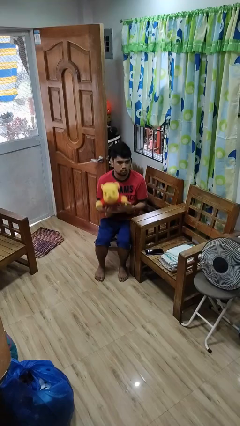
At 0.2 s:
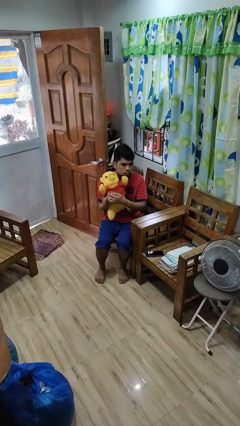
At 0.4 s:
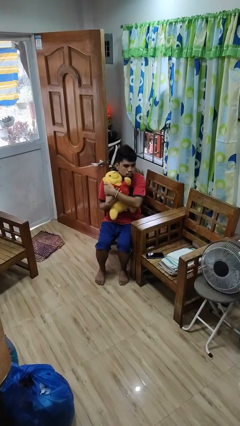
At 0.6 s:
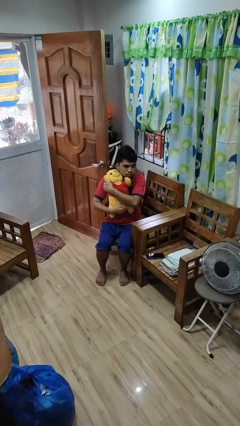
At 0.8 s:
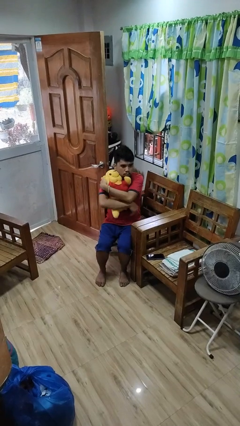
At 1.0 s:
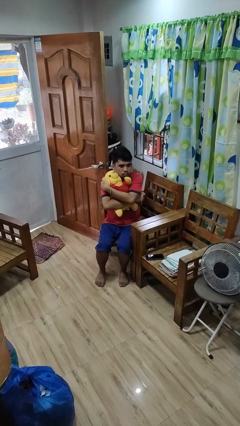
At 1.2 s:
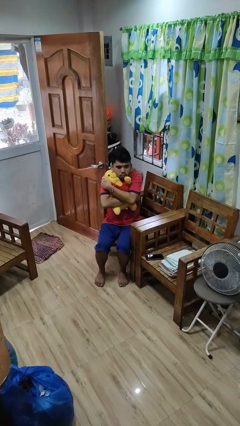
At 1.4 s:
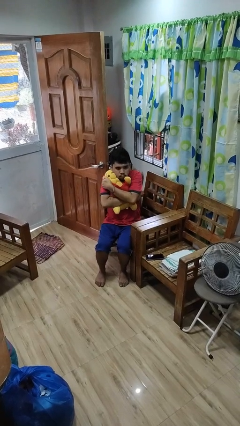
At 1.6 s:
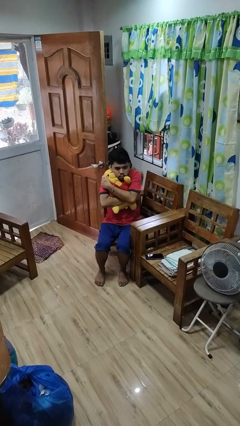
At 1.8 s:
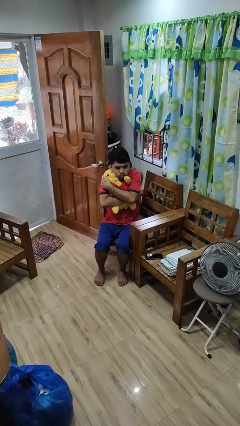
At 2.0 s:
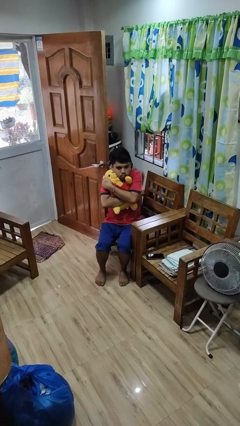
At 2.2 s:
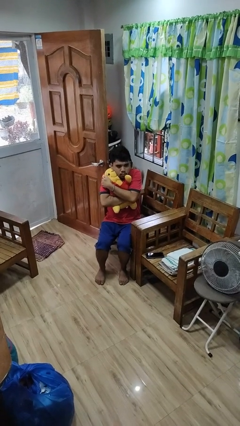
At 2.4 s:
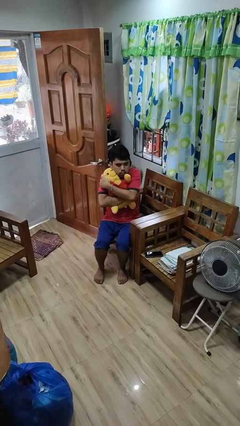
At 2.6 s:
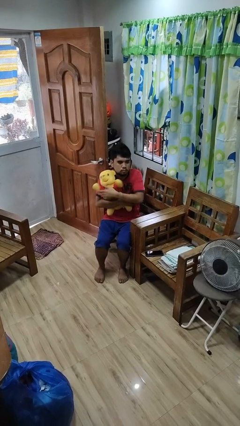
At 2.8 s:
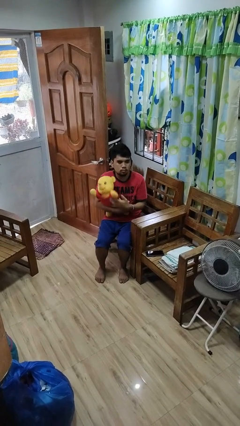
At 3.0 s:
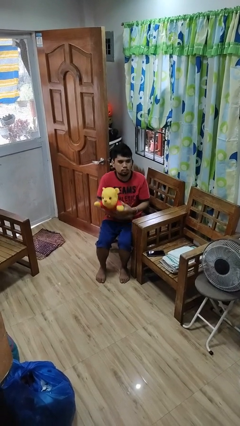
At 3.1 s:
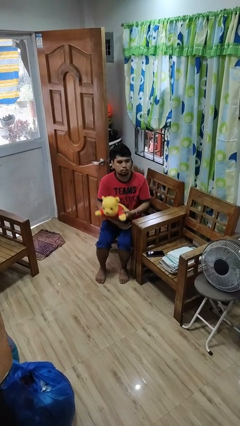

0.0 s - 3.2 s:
person hugs stuffed animal

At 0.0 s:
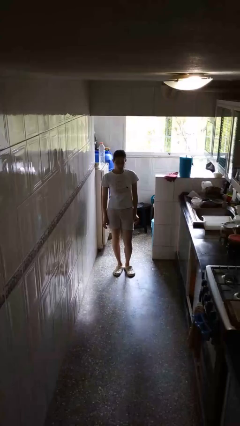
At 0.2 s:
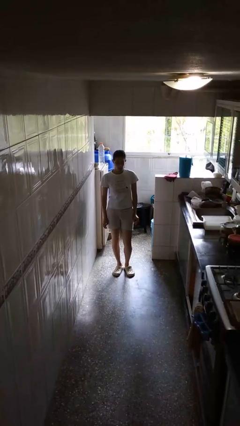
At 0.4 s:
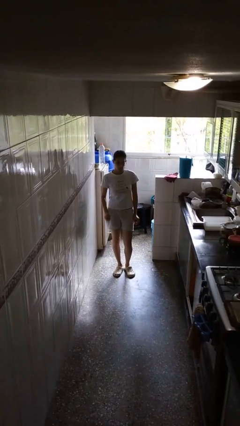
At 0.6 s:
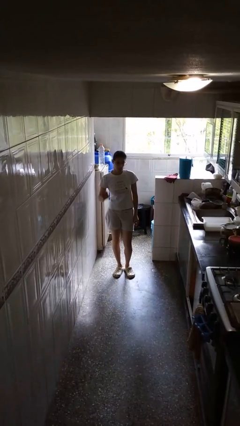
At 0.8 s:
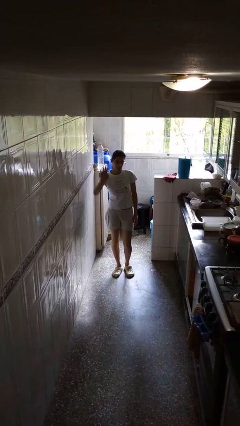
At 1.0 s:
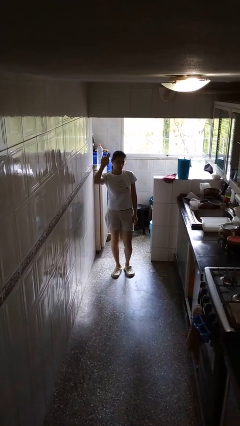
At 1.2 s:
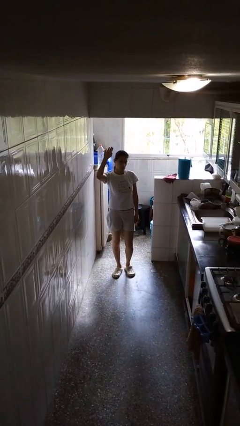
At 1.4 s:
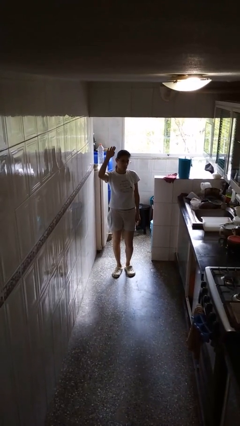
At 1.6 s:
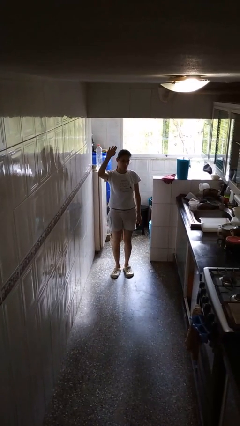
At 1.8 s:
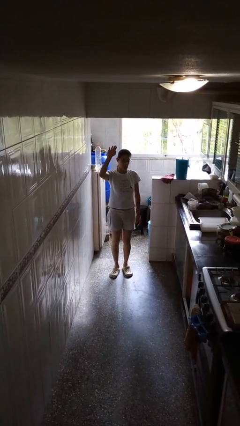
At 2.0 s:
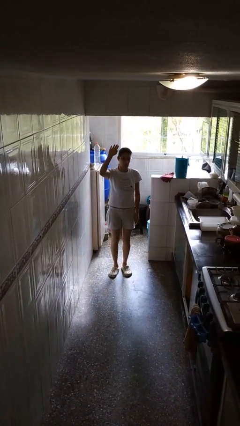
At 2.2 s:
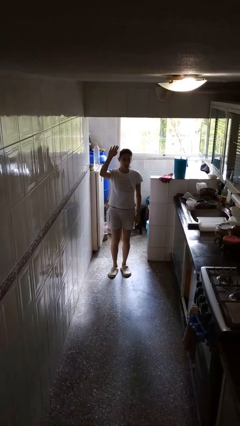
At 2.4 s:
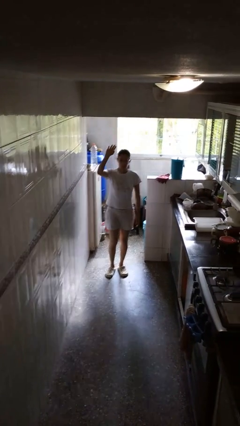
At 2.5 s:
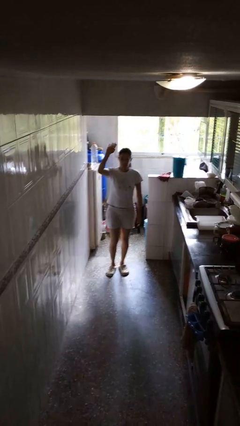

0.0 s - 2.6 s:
person gestures raise hand

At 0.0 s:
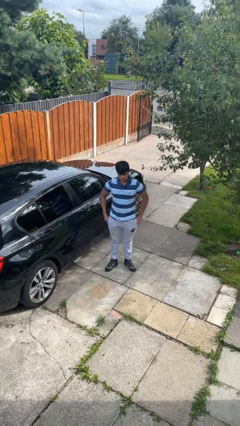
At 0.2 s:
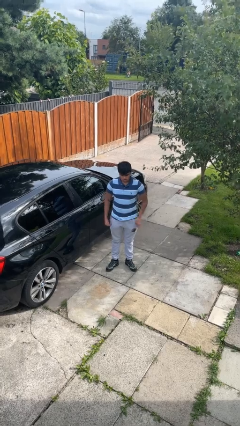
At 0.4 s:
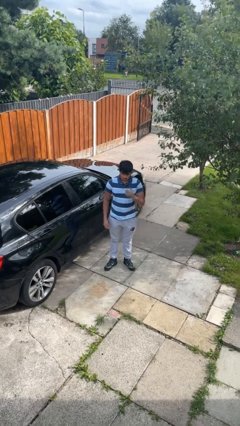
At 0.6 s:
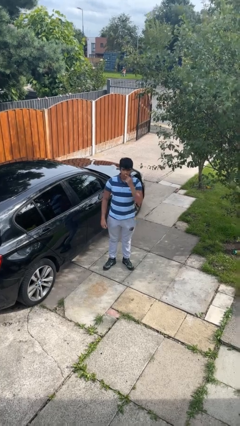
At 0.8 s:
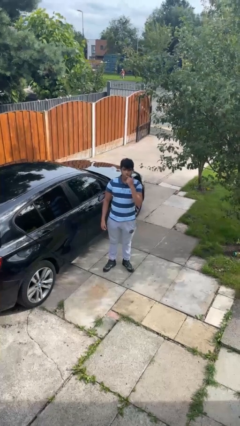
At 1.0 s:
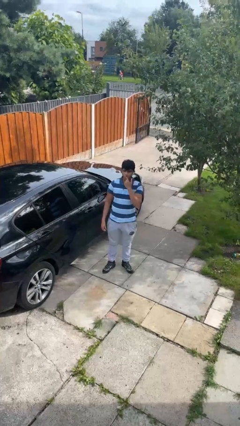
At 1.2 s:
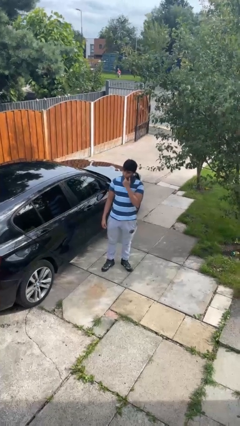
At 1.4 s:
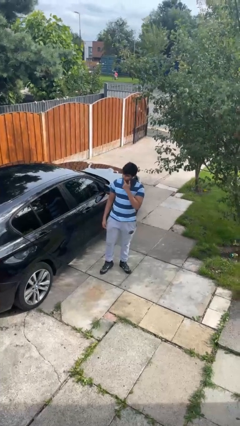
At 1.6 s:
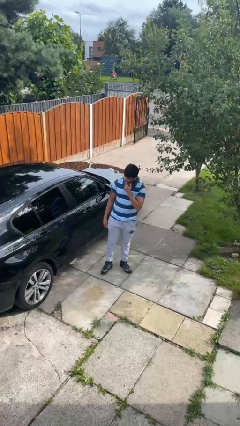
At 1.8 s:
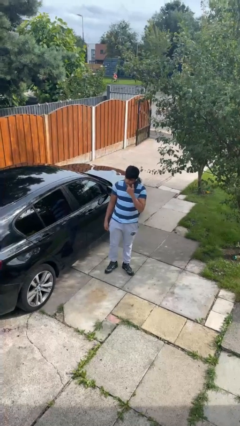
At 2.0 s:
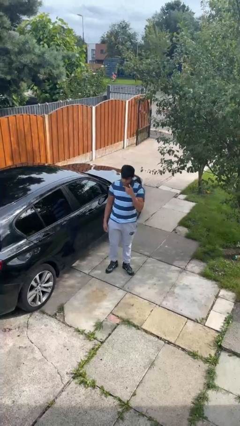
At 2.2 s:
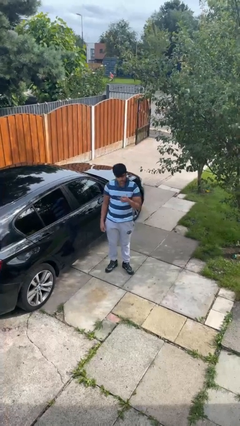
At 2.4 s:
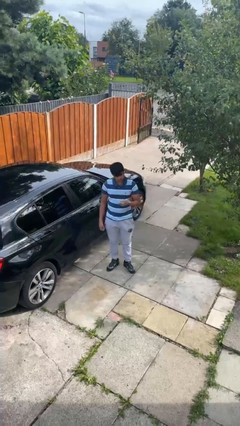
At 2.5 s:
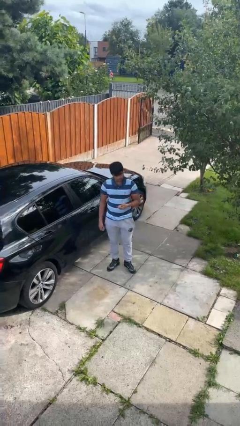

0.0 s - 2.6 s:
person licks fingers

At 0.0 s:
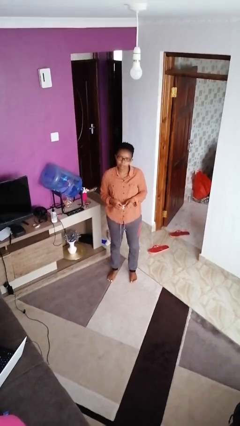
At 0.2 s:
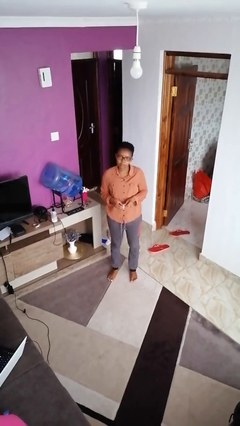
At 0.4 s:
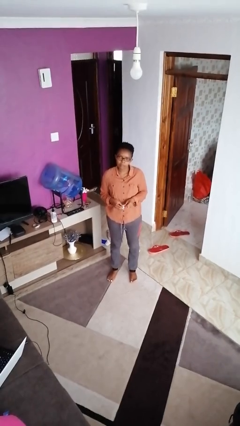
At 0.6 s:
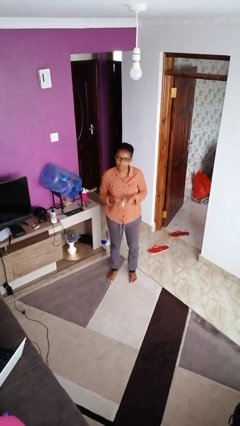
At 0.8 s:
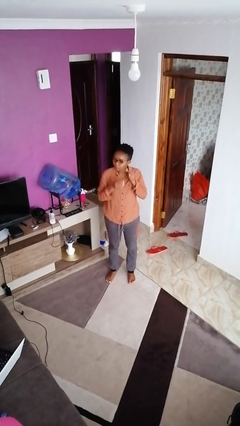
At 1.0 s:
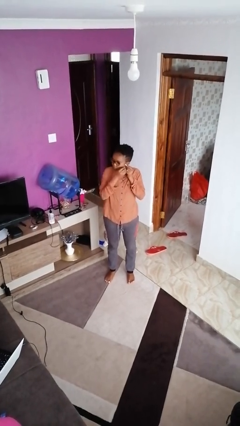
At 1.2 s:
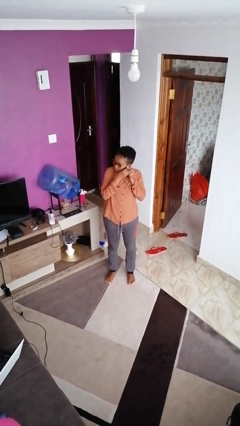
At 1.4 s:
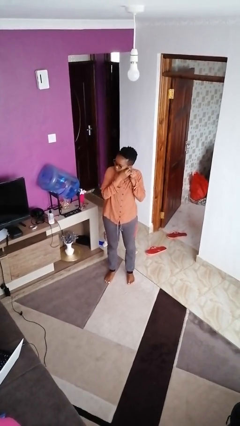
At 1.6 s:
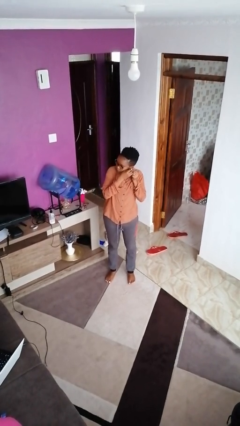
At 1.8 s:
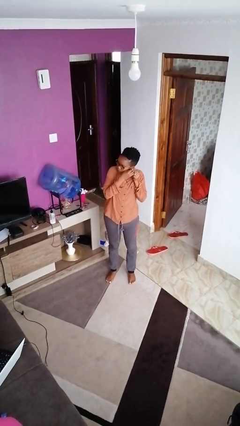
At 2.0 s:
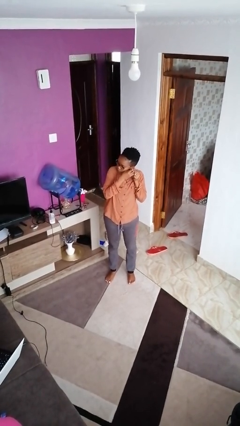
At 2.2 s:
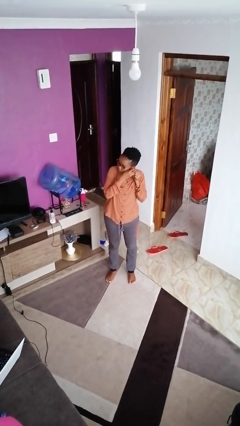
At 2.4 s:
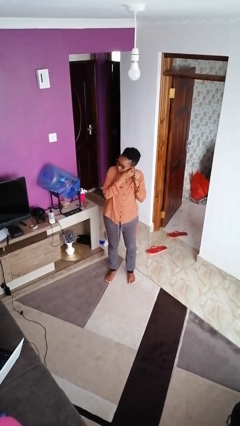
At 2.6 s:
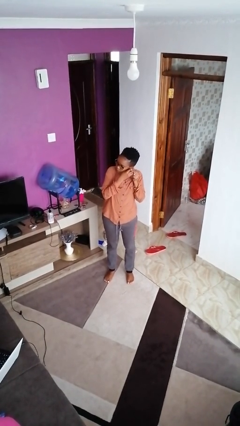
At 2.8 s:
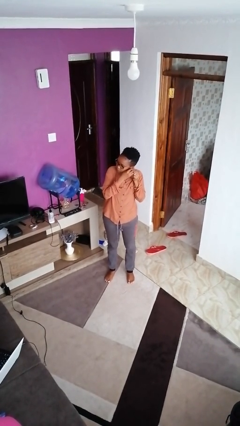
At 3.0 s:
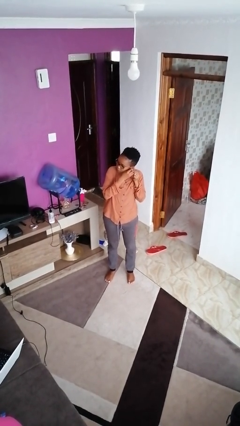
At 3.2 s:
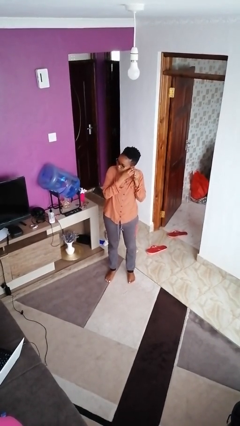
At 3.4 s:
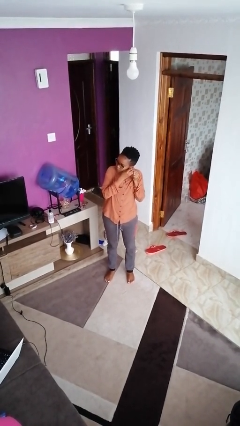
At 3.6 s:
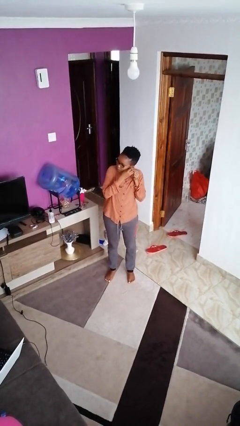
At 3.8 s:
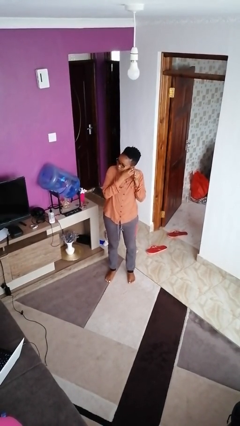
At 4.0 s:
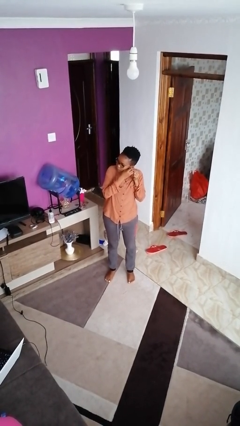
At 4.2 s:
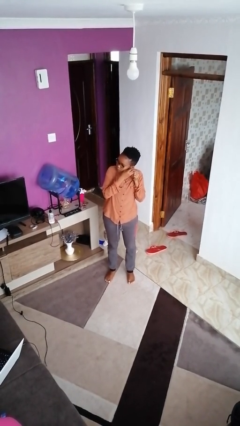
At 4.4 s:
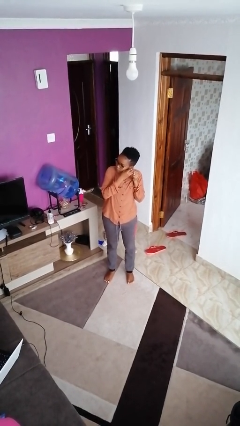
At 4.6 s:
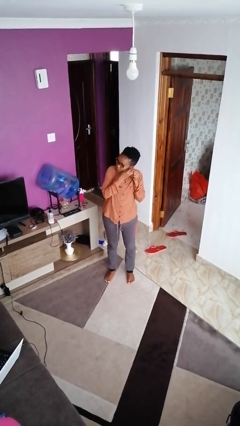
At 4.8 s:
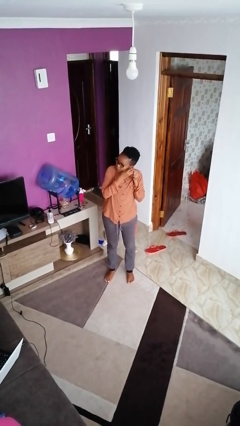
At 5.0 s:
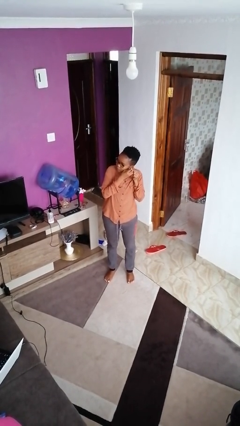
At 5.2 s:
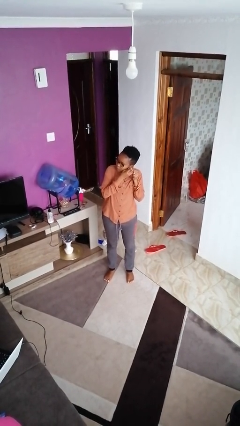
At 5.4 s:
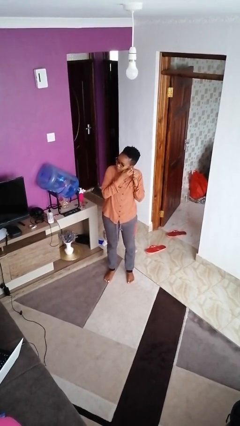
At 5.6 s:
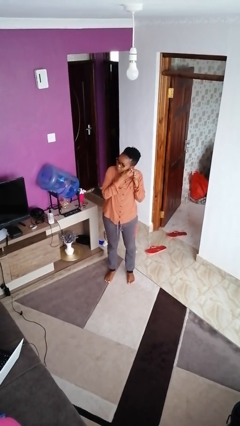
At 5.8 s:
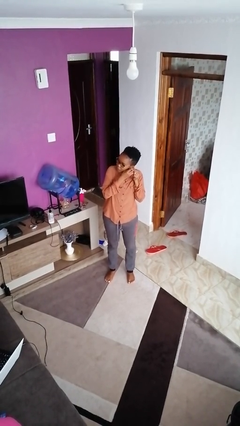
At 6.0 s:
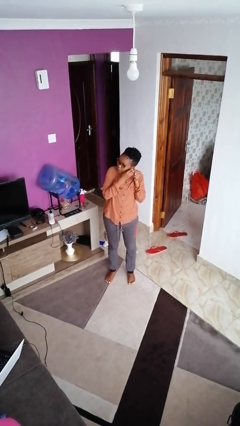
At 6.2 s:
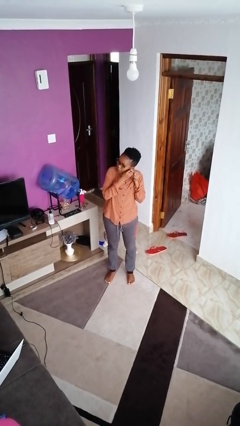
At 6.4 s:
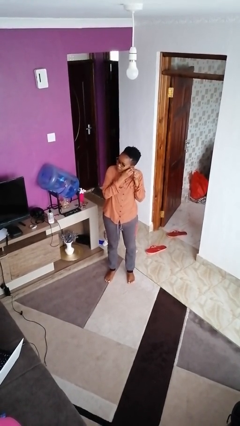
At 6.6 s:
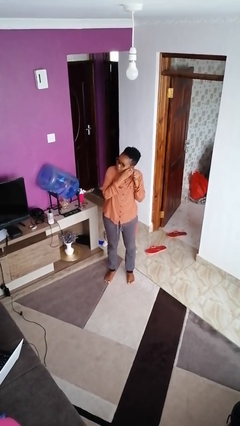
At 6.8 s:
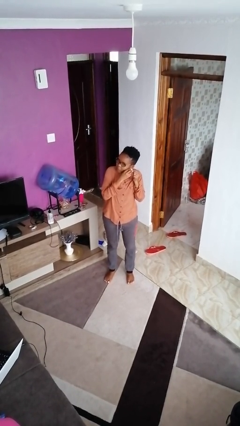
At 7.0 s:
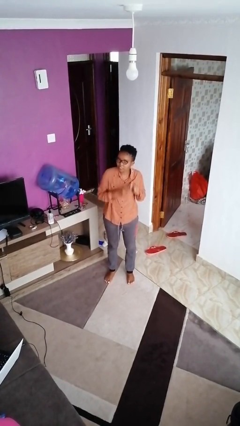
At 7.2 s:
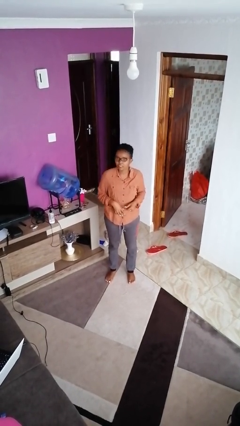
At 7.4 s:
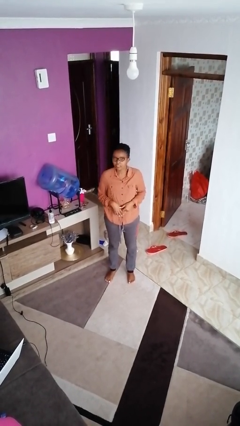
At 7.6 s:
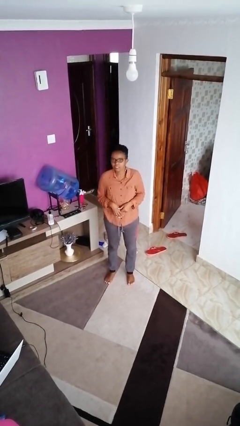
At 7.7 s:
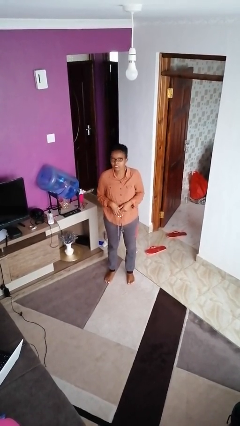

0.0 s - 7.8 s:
person puts on earrings

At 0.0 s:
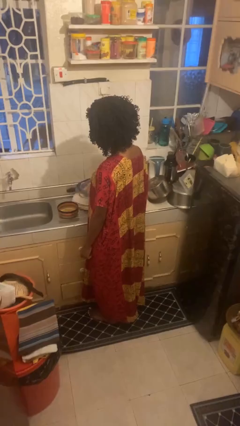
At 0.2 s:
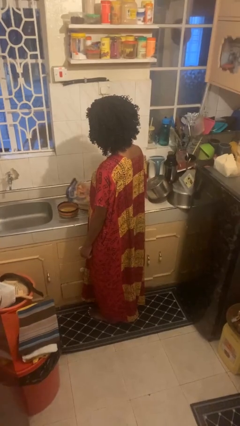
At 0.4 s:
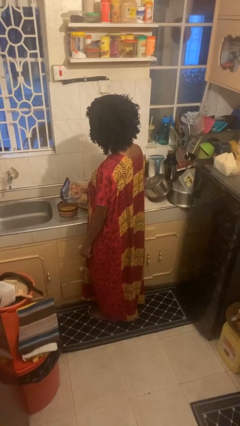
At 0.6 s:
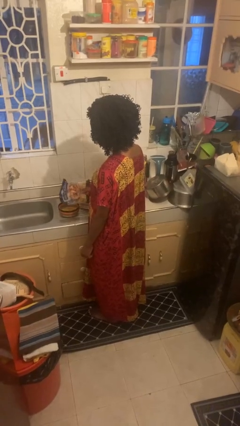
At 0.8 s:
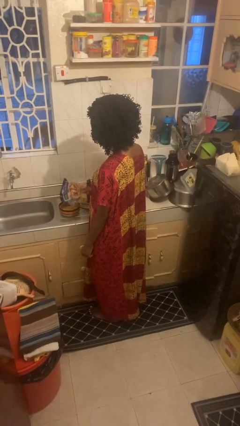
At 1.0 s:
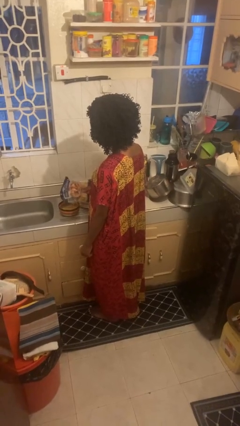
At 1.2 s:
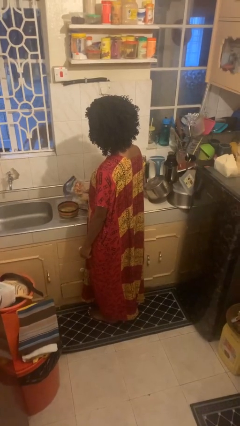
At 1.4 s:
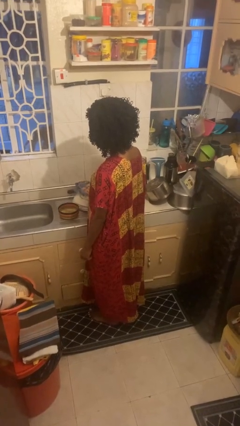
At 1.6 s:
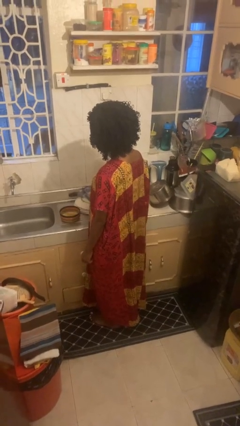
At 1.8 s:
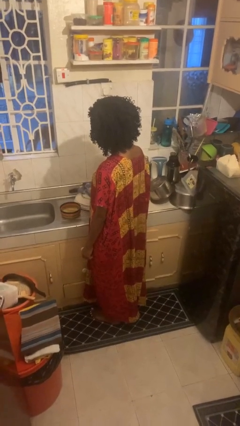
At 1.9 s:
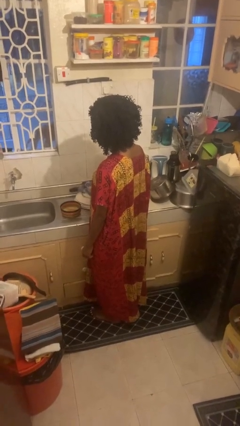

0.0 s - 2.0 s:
person pours into bowl
